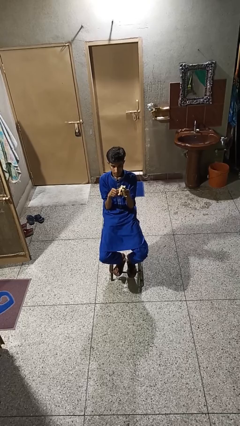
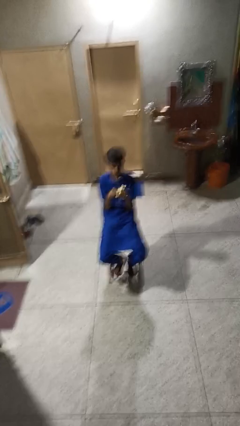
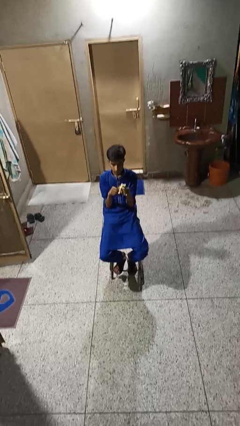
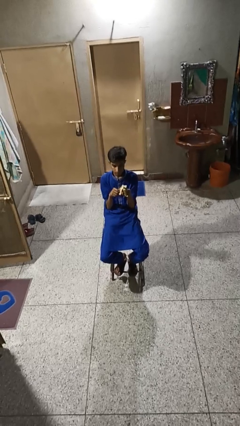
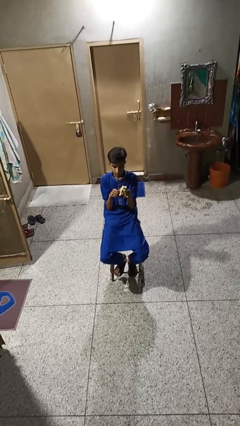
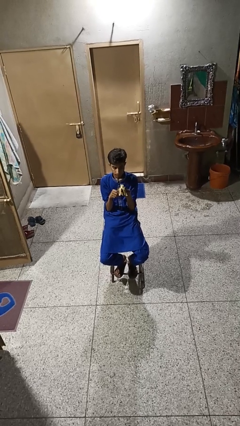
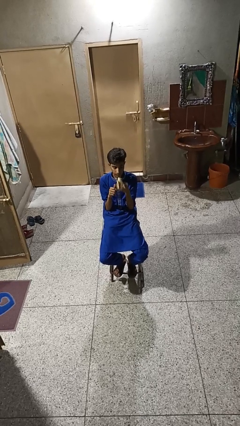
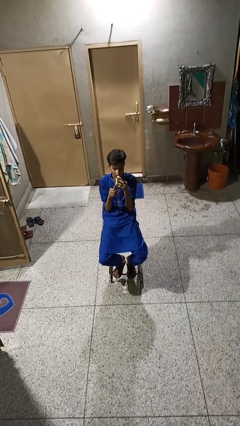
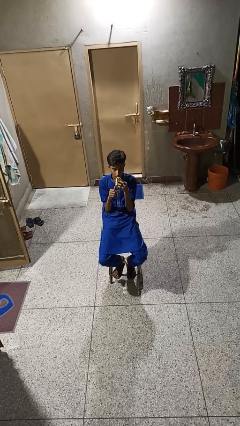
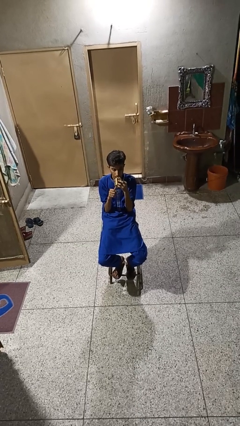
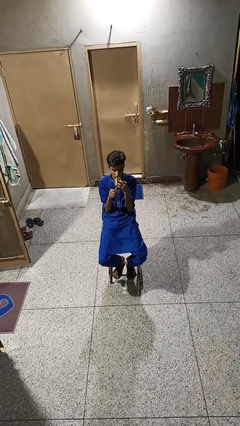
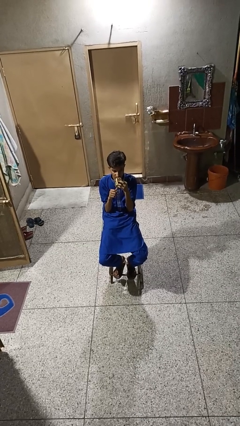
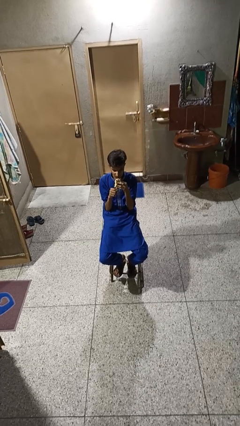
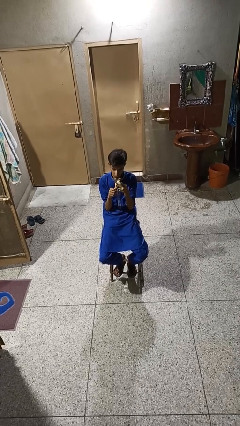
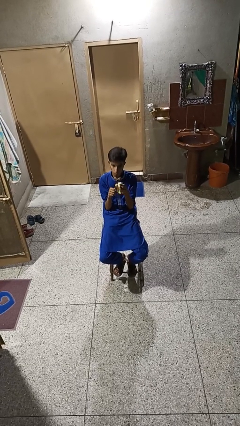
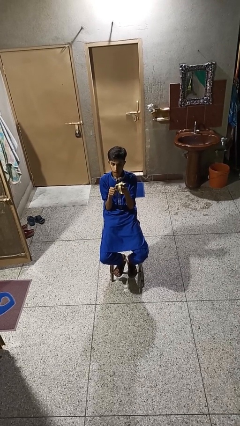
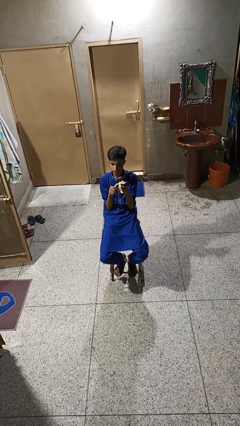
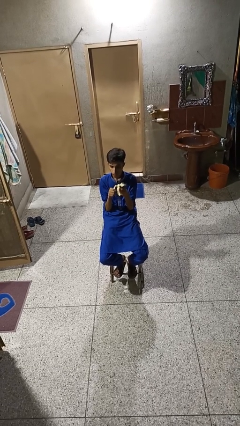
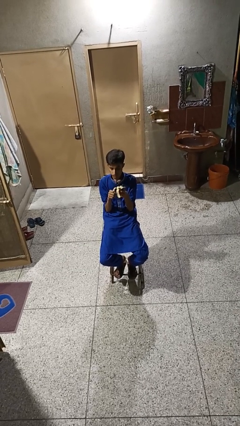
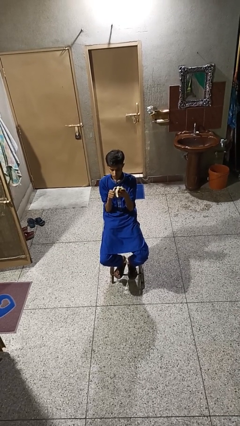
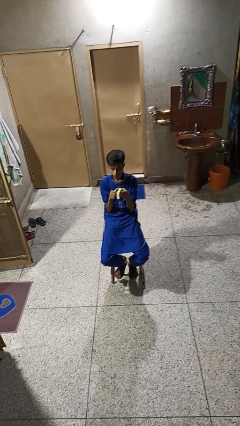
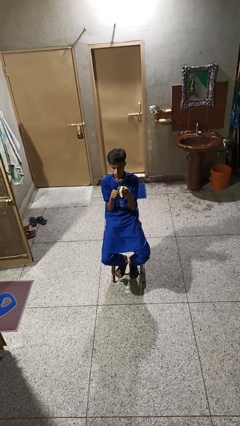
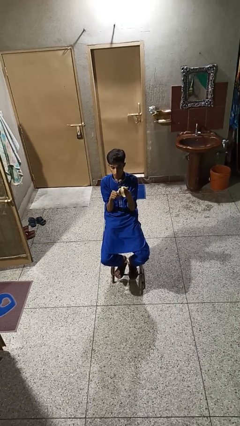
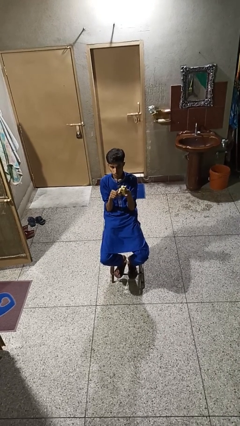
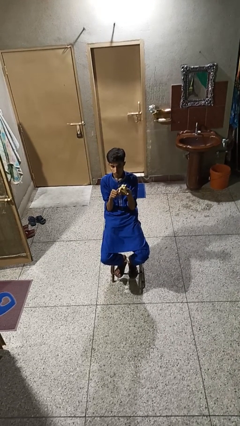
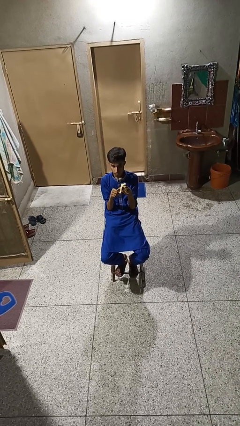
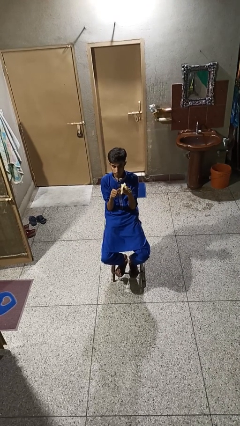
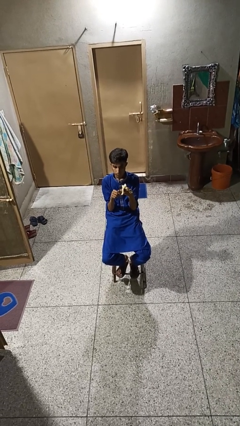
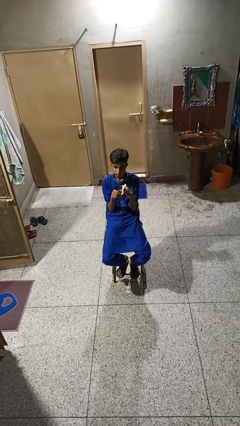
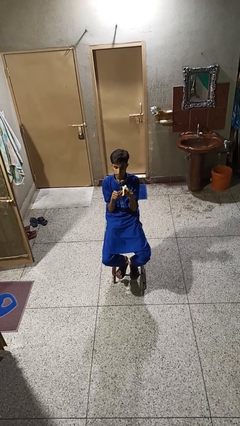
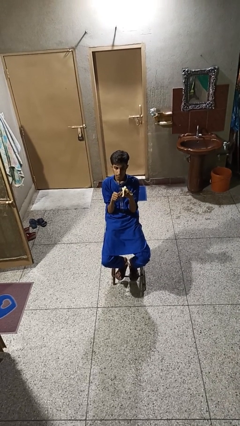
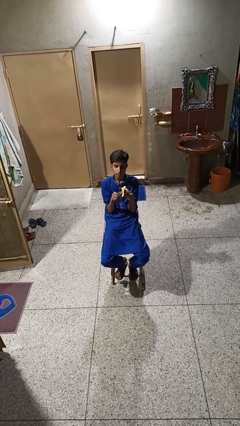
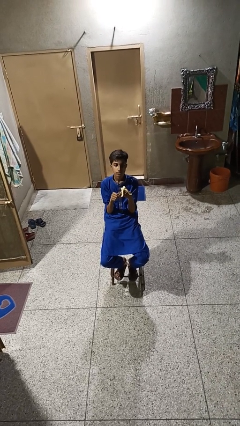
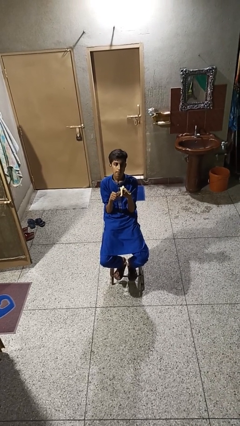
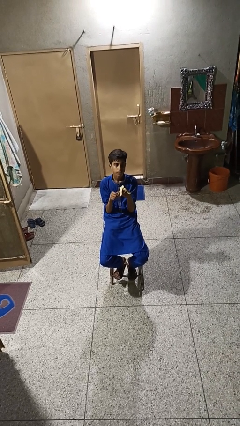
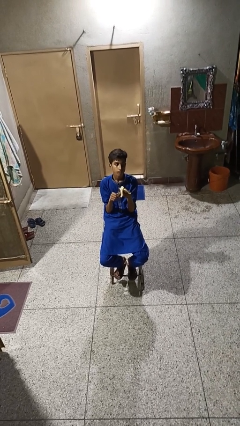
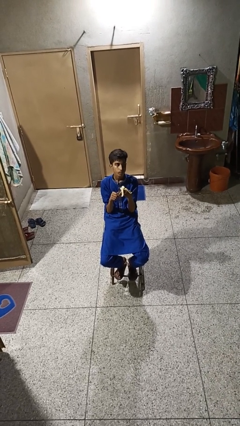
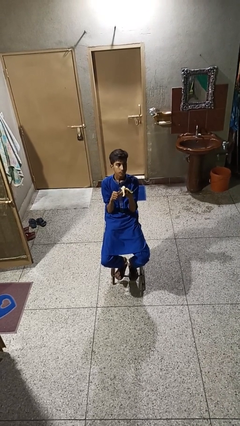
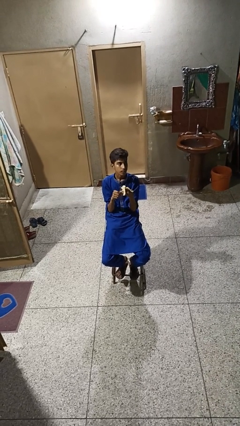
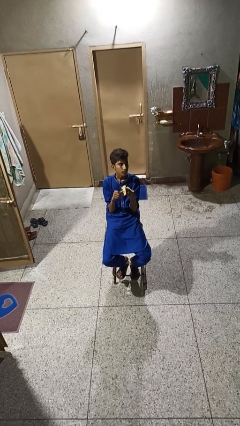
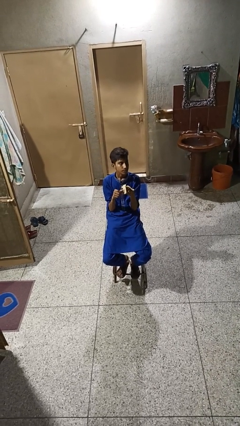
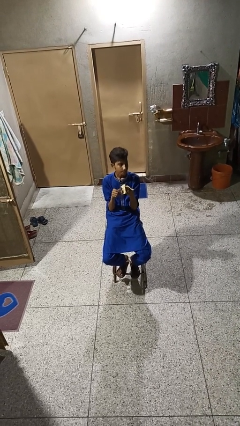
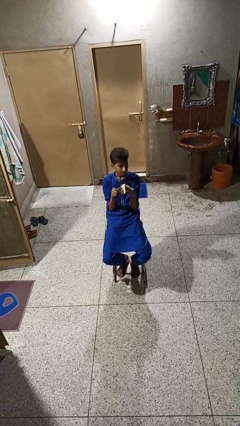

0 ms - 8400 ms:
person eats banana

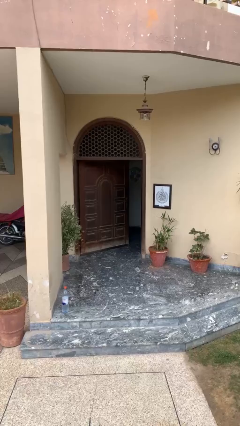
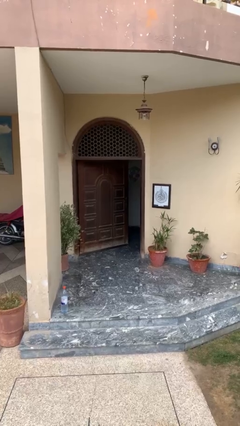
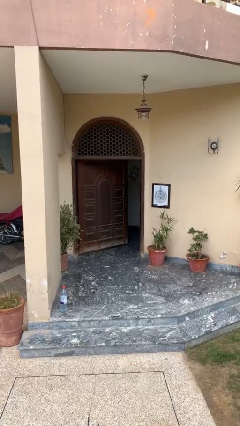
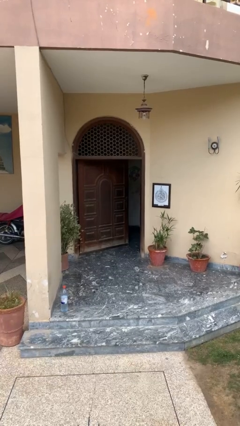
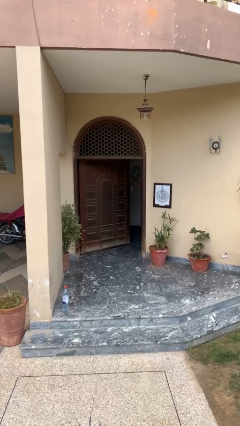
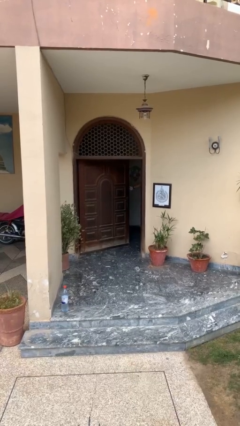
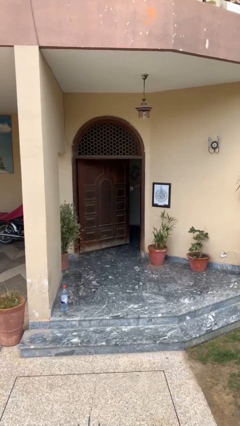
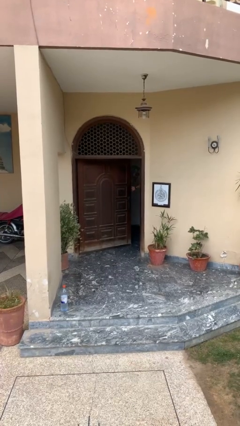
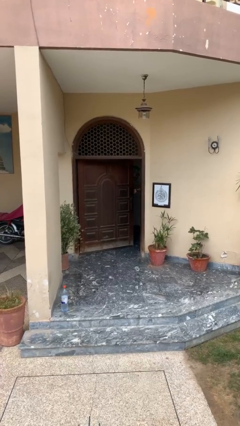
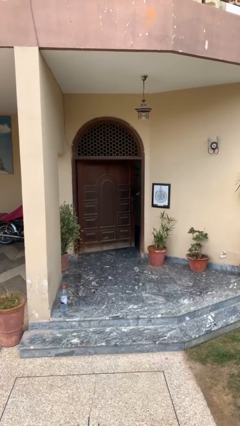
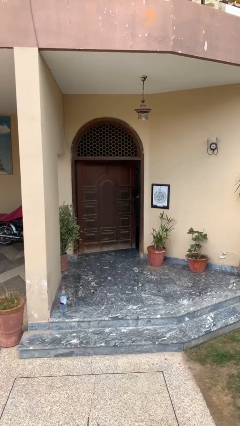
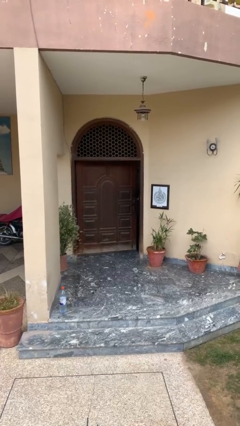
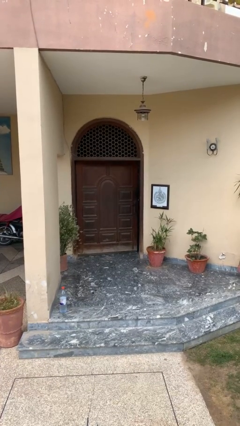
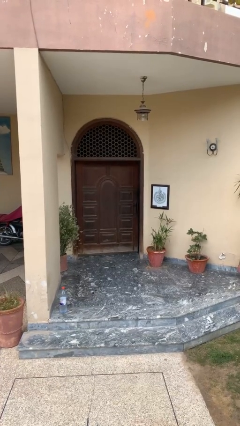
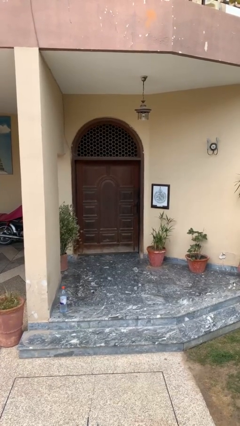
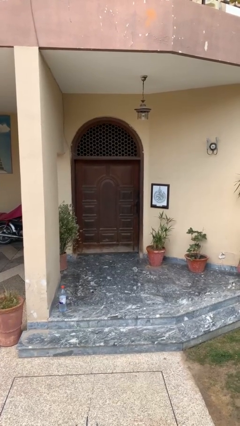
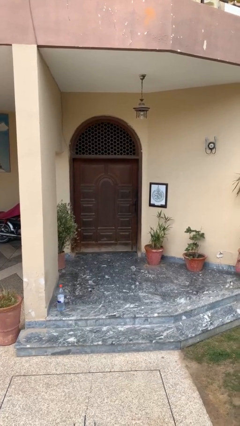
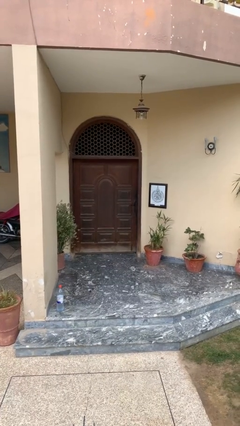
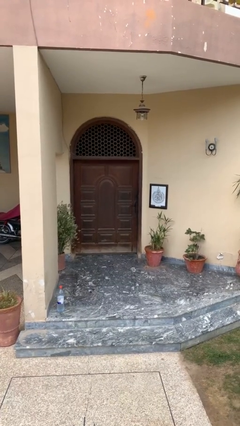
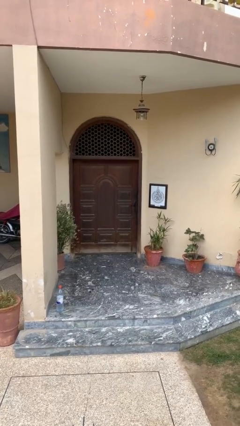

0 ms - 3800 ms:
person closes facility door

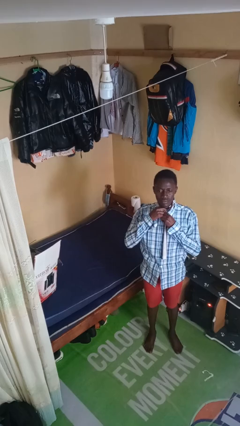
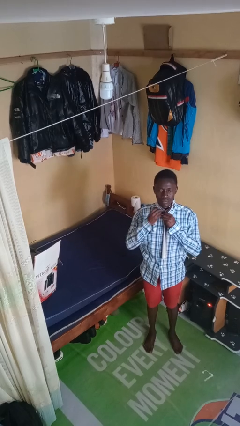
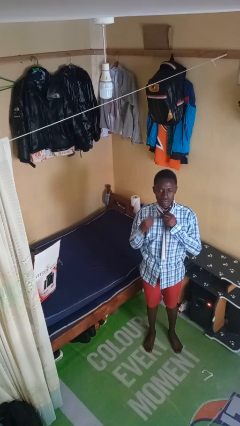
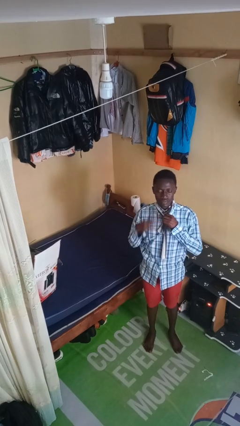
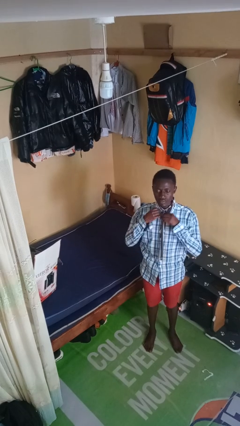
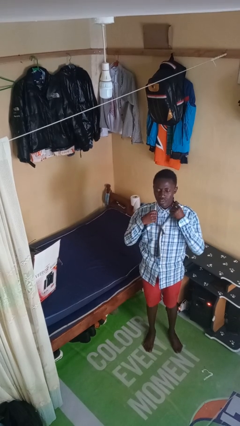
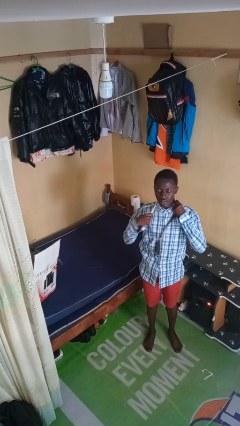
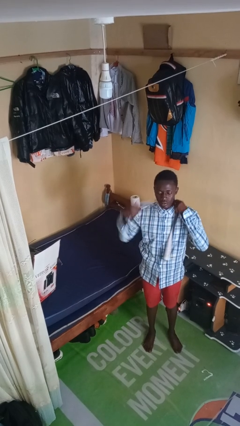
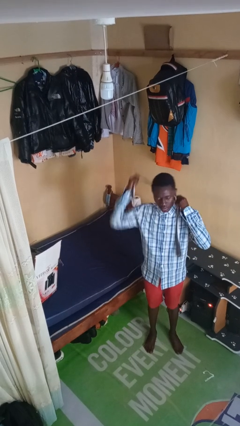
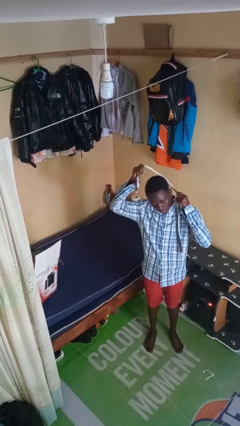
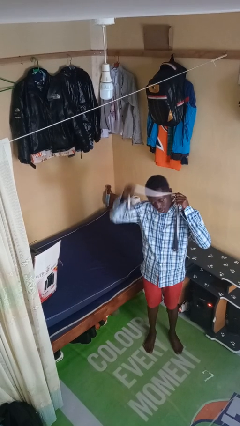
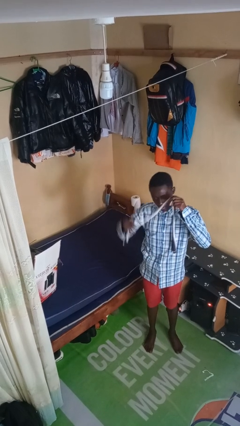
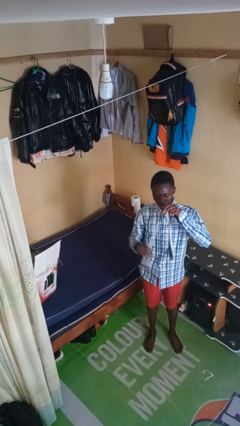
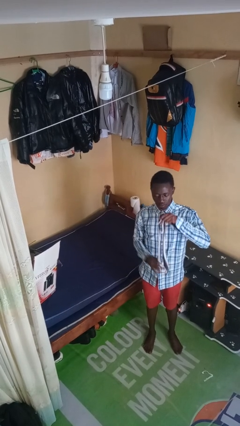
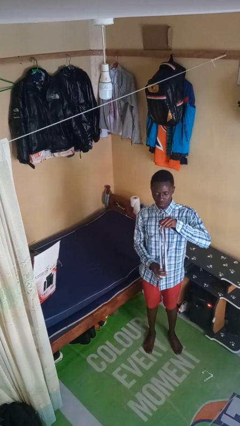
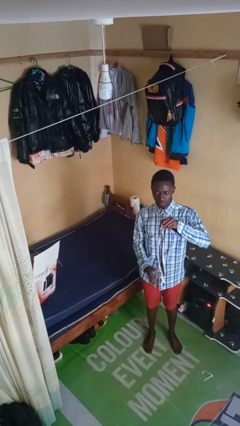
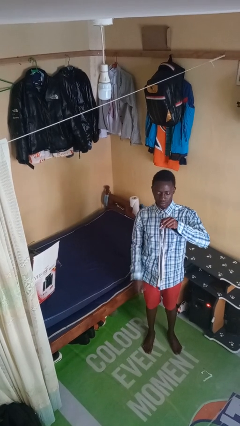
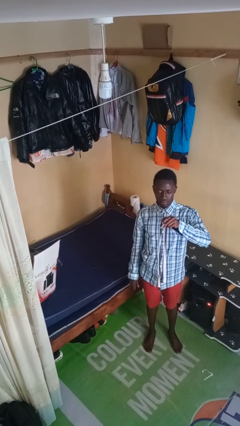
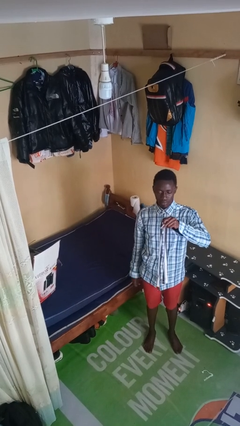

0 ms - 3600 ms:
person takes off necktie

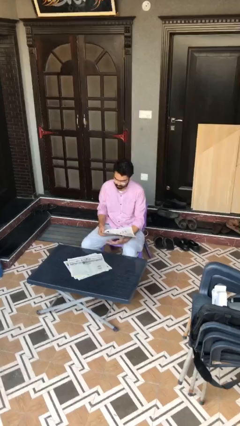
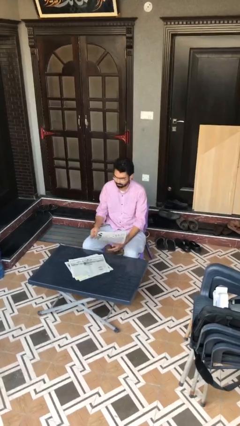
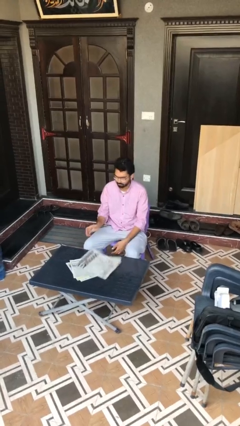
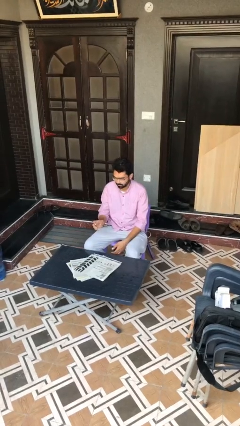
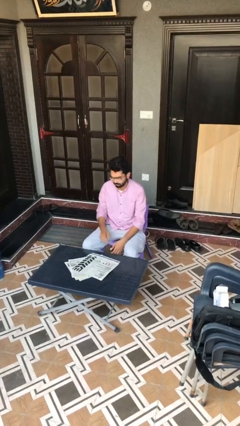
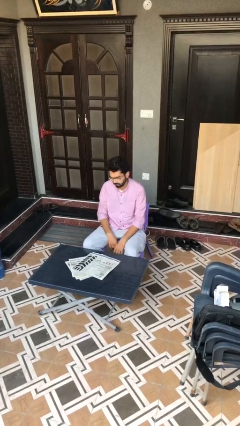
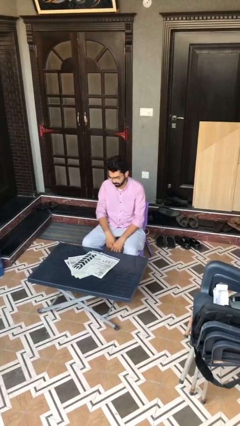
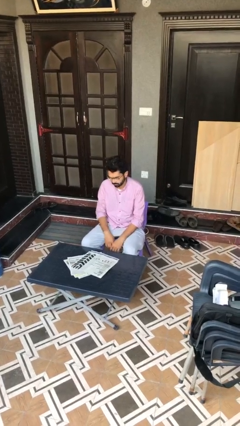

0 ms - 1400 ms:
person puts down object on table

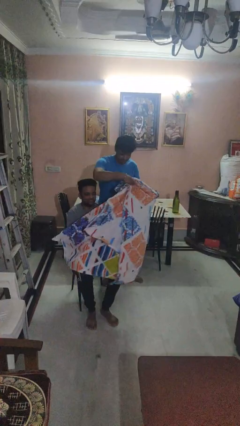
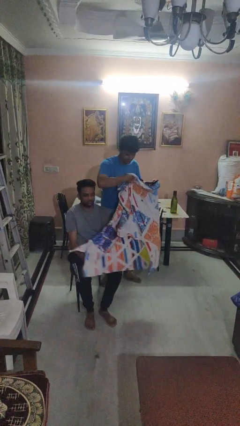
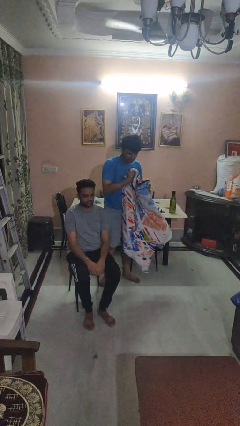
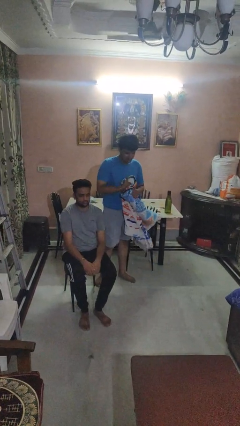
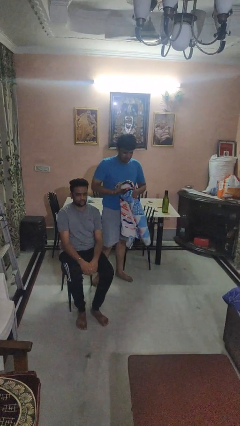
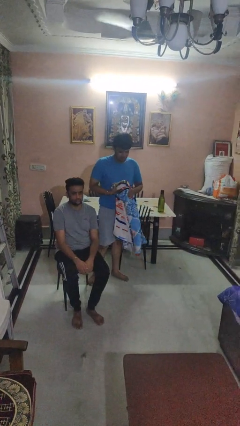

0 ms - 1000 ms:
person uncovers friend with blanket
